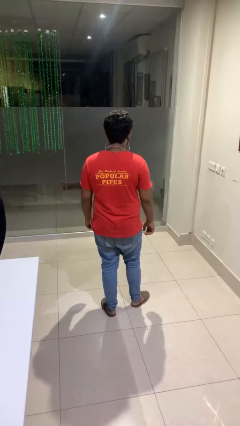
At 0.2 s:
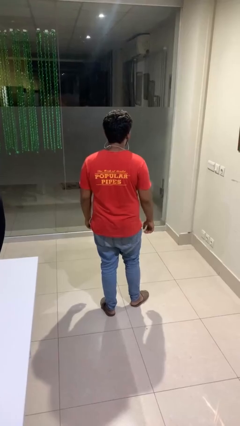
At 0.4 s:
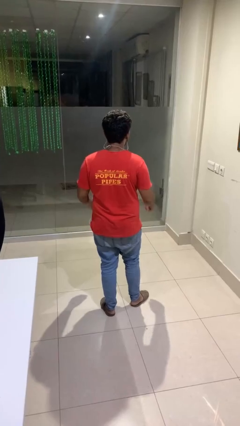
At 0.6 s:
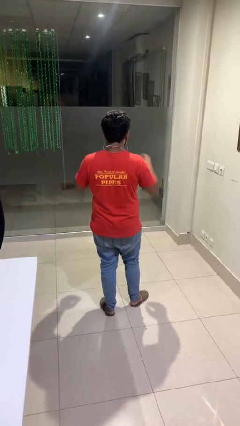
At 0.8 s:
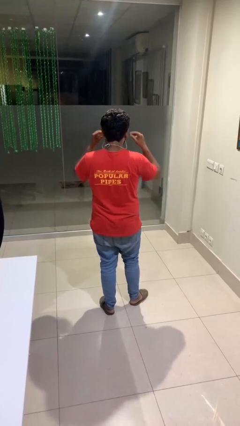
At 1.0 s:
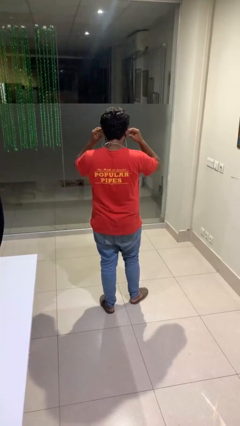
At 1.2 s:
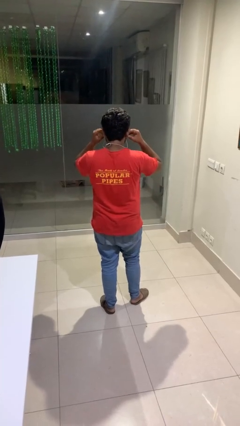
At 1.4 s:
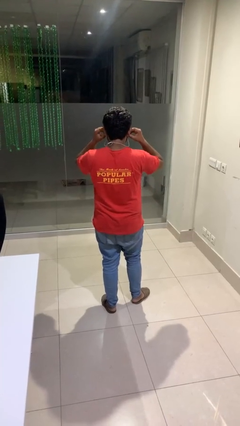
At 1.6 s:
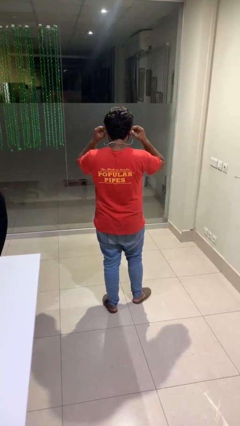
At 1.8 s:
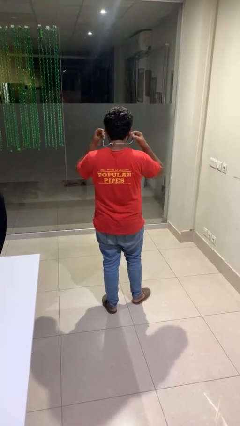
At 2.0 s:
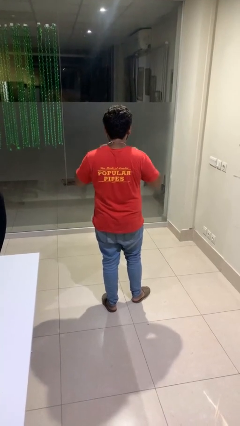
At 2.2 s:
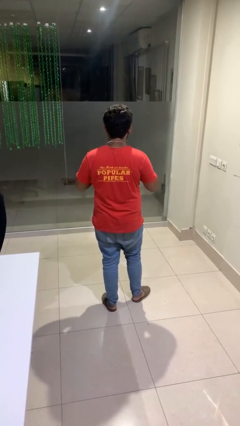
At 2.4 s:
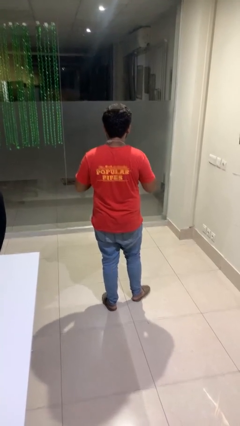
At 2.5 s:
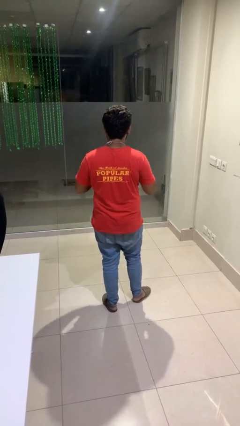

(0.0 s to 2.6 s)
person takes off headphones

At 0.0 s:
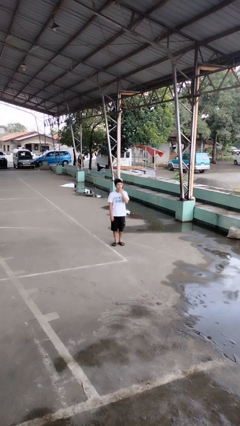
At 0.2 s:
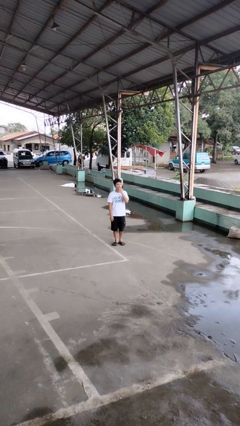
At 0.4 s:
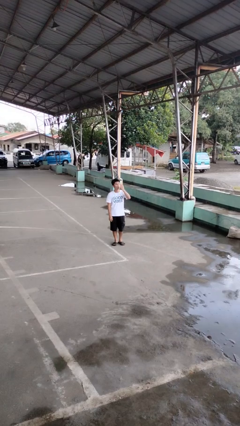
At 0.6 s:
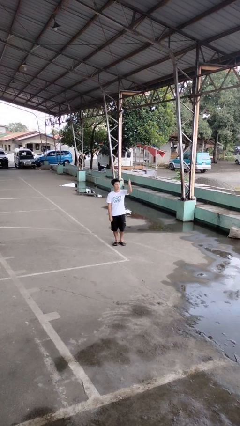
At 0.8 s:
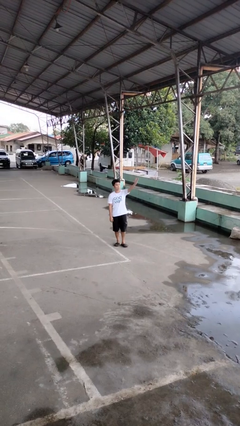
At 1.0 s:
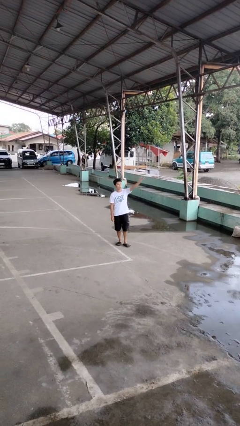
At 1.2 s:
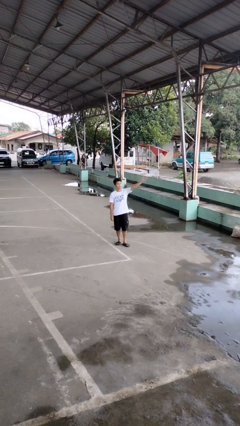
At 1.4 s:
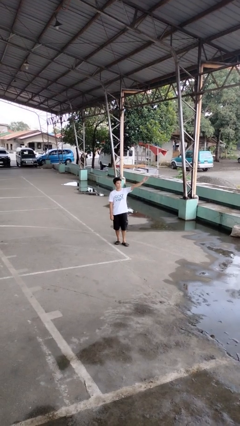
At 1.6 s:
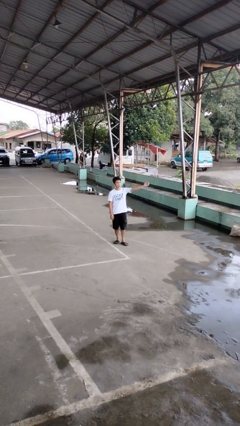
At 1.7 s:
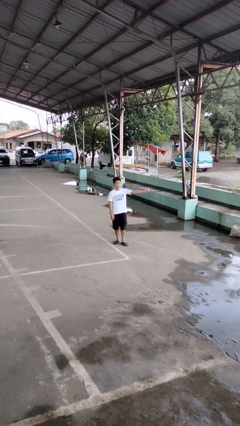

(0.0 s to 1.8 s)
person gestures blow kiss

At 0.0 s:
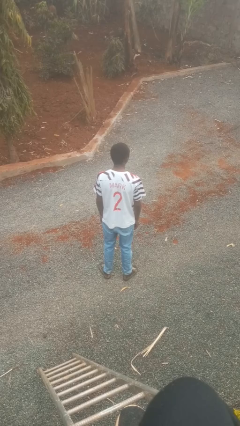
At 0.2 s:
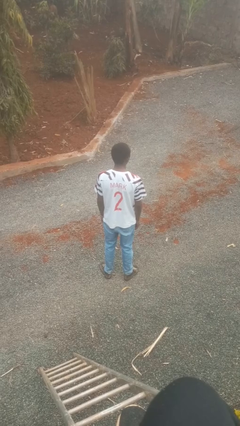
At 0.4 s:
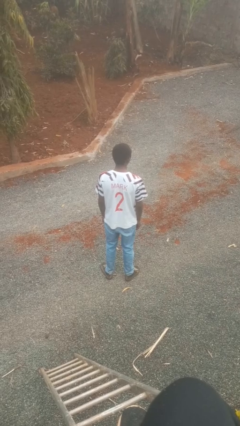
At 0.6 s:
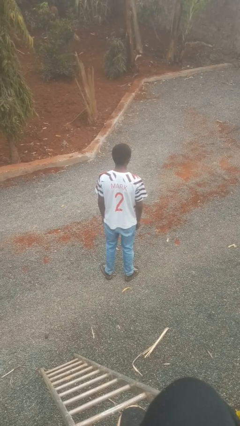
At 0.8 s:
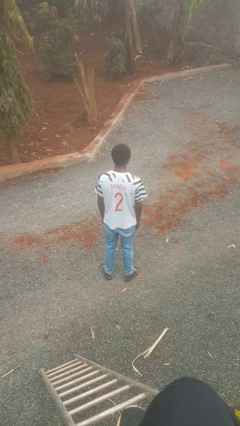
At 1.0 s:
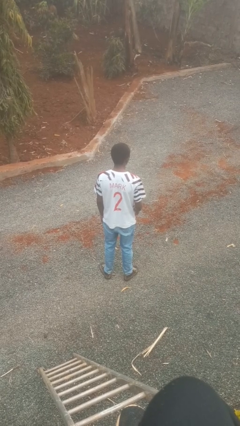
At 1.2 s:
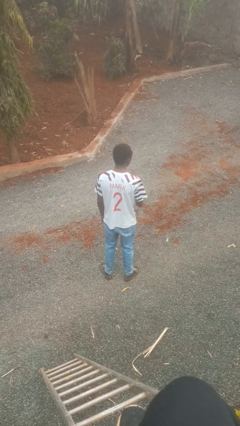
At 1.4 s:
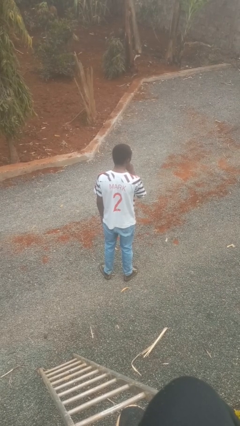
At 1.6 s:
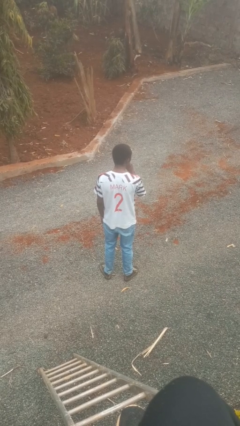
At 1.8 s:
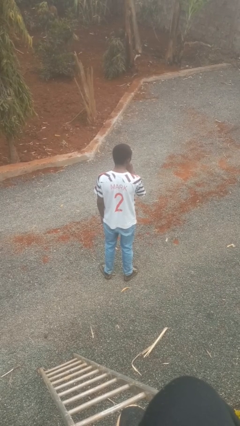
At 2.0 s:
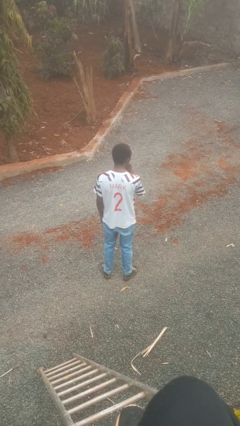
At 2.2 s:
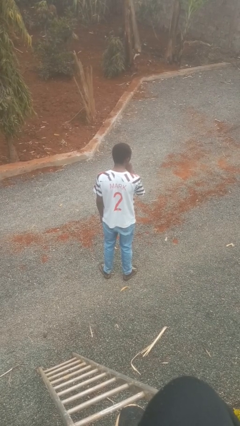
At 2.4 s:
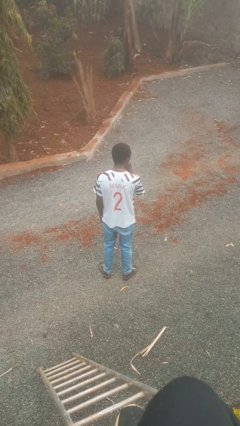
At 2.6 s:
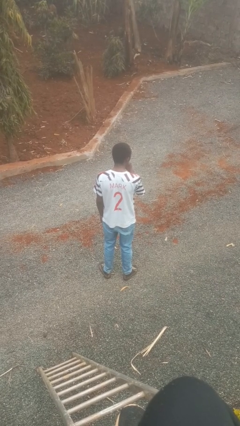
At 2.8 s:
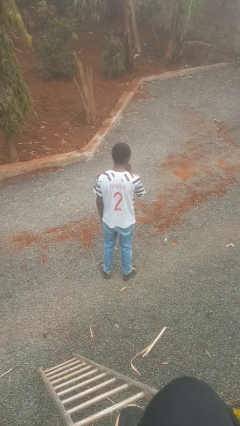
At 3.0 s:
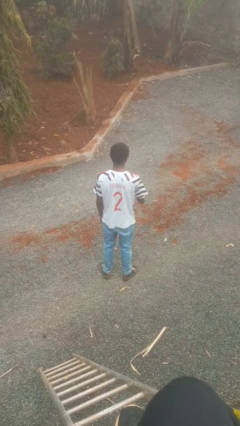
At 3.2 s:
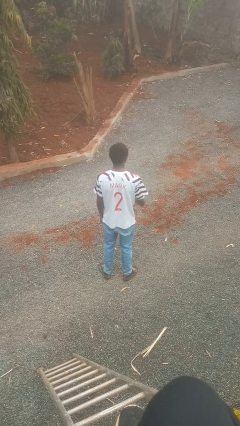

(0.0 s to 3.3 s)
person gestures be quiet

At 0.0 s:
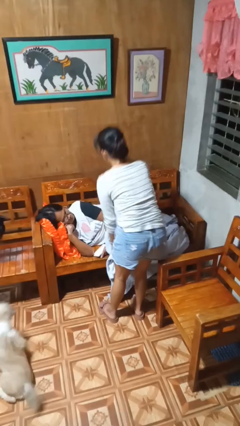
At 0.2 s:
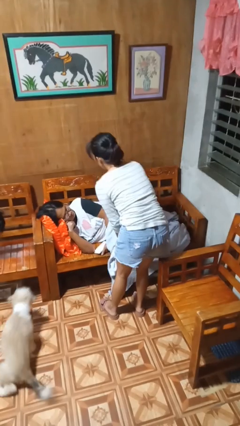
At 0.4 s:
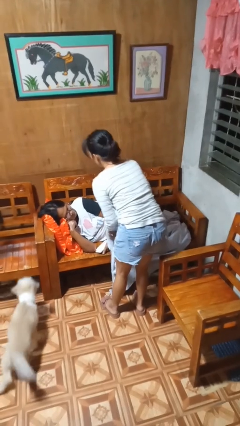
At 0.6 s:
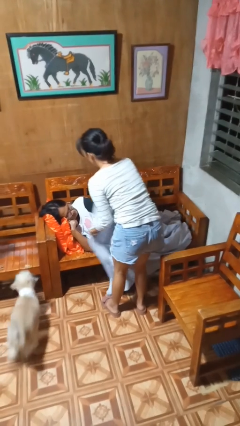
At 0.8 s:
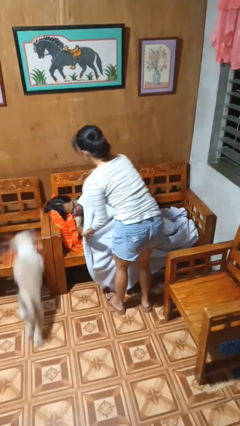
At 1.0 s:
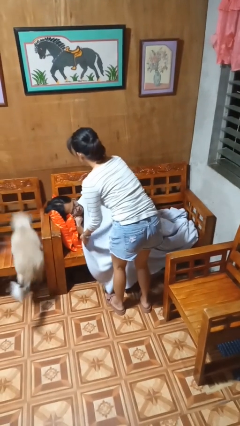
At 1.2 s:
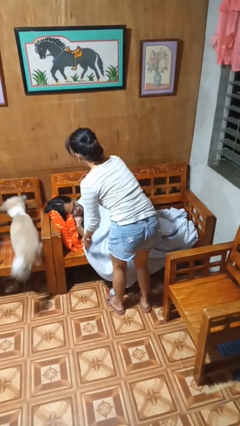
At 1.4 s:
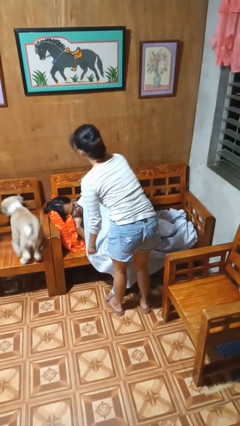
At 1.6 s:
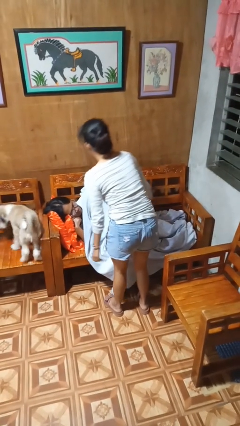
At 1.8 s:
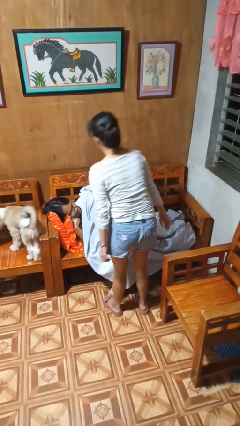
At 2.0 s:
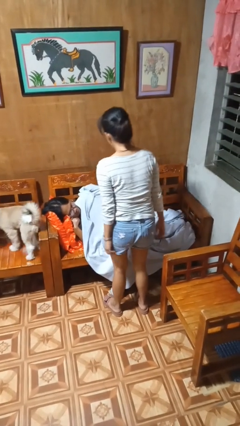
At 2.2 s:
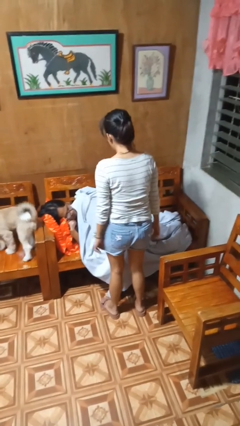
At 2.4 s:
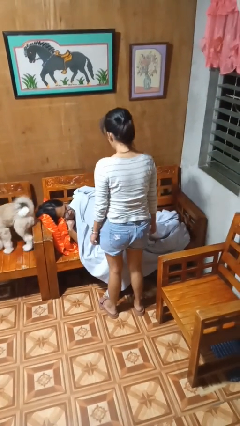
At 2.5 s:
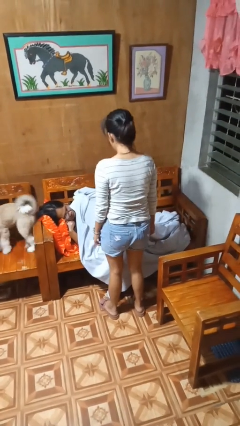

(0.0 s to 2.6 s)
person covers friend with blanket

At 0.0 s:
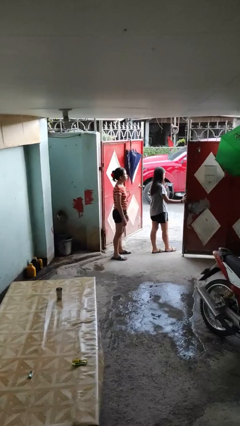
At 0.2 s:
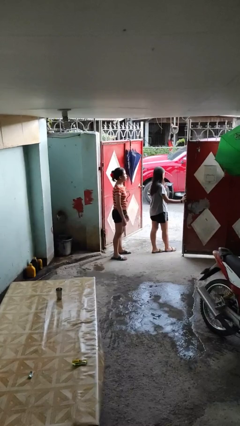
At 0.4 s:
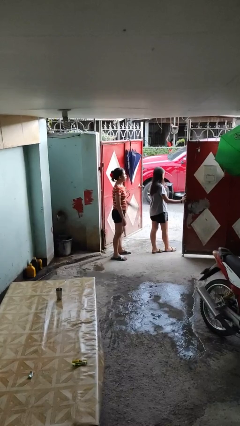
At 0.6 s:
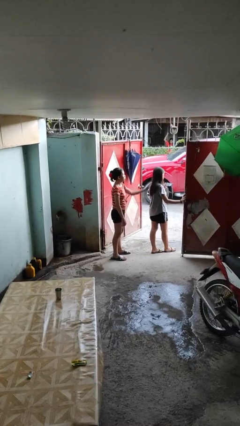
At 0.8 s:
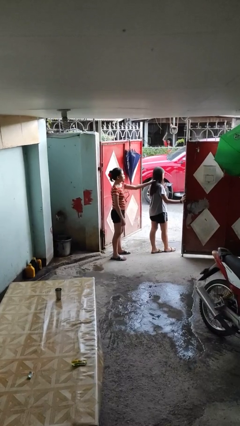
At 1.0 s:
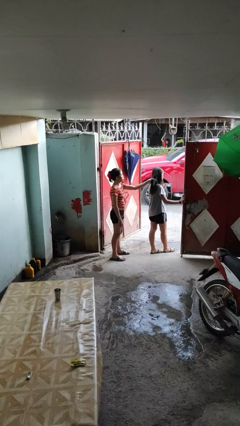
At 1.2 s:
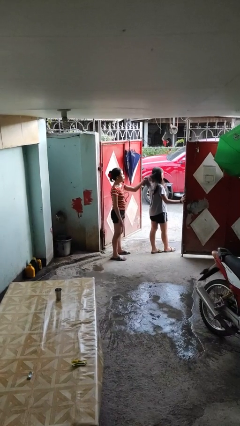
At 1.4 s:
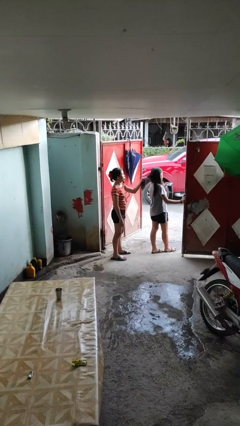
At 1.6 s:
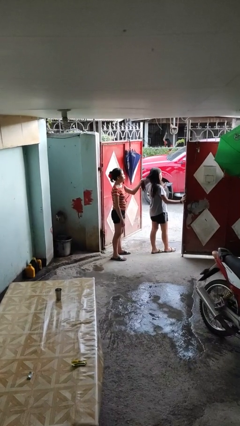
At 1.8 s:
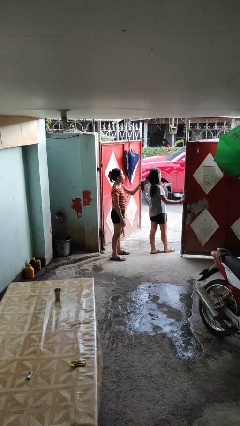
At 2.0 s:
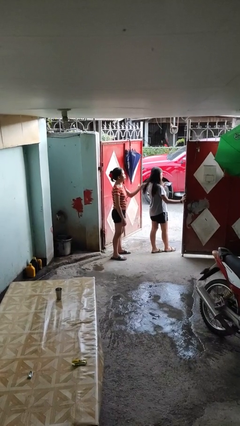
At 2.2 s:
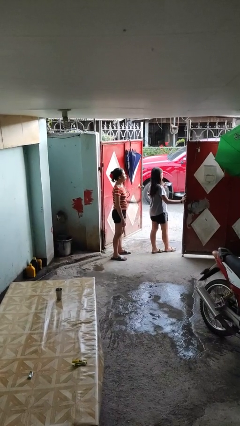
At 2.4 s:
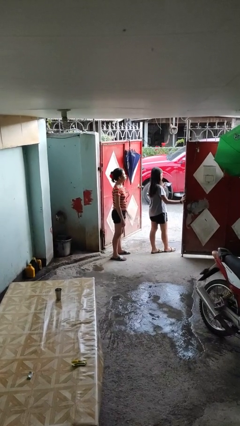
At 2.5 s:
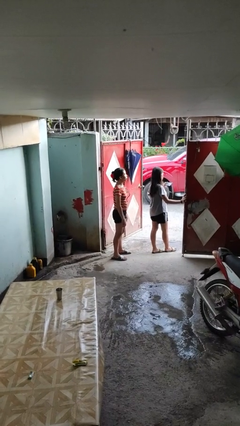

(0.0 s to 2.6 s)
person grabs person by hair

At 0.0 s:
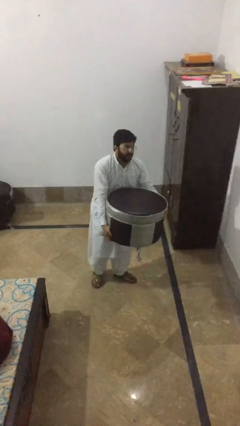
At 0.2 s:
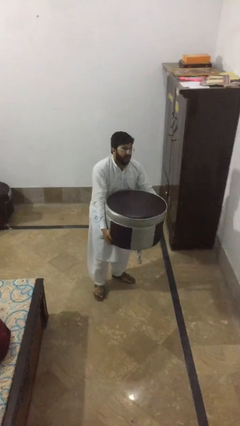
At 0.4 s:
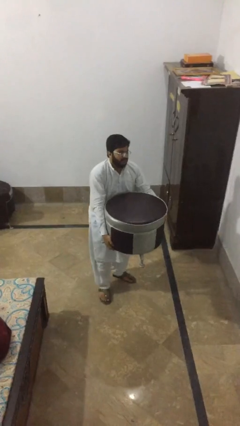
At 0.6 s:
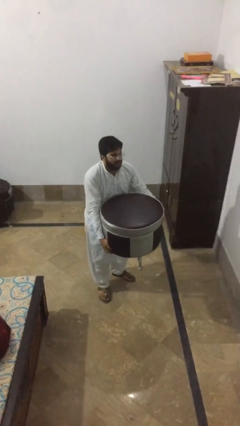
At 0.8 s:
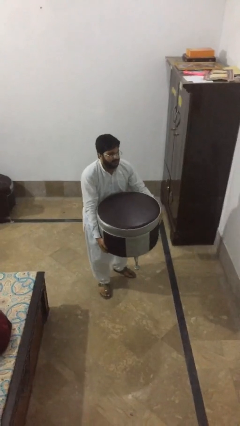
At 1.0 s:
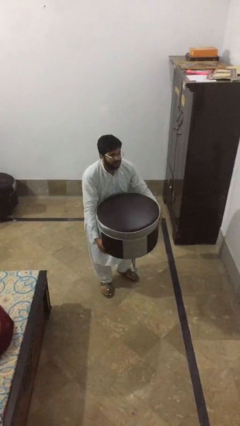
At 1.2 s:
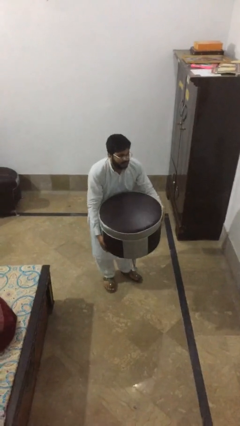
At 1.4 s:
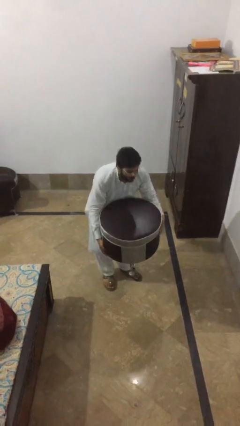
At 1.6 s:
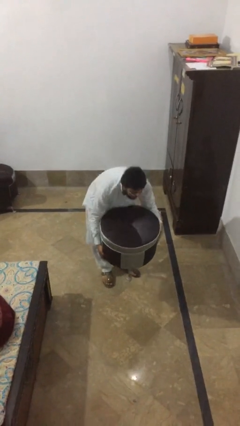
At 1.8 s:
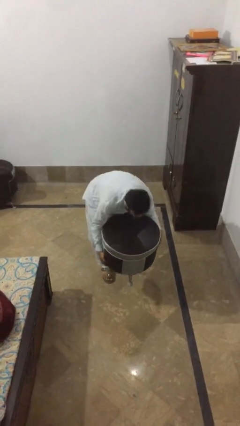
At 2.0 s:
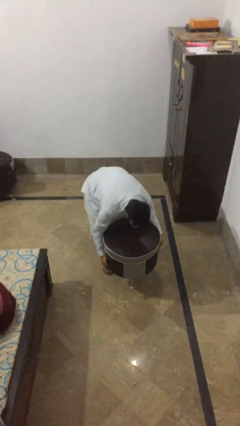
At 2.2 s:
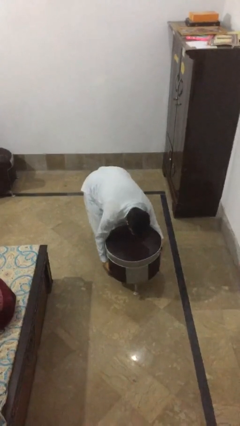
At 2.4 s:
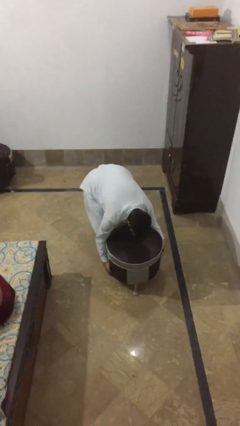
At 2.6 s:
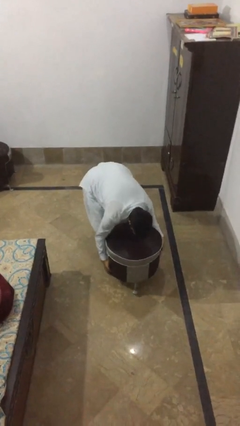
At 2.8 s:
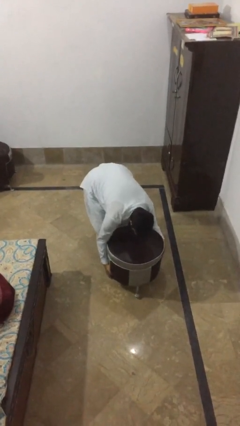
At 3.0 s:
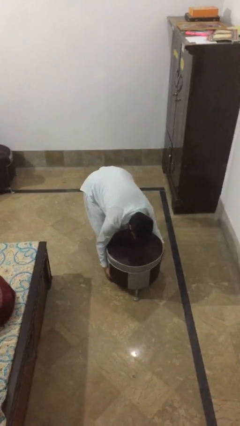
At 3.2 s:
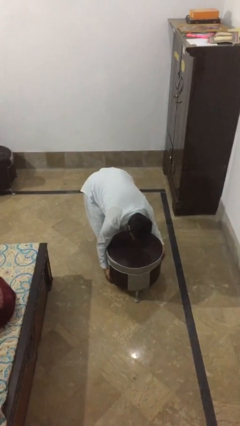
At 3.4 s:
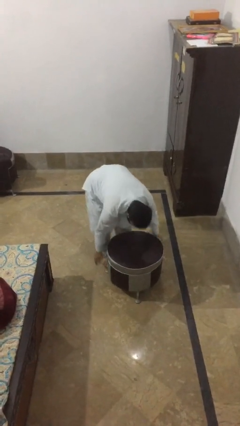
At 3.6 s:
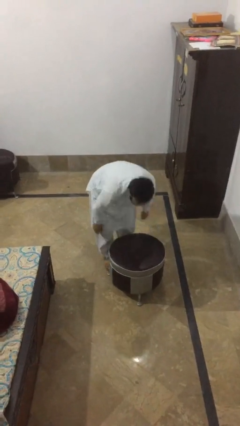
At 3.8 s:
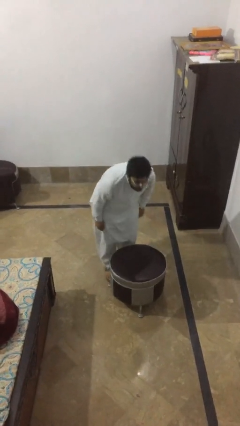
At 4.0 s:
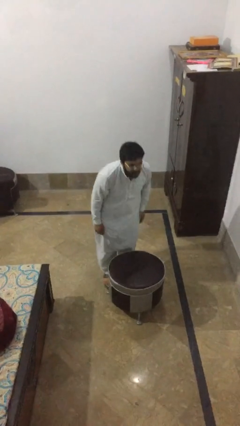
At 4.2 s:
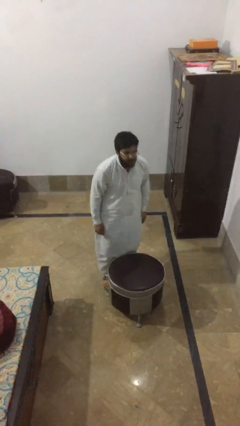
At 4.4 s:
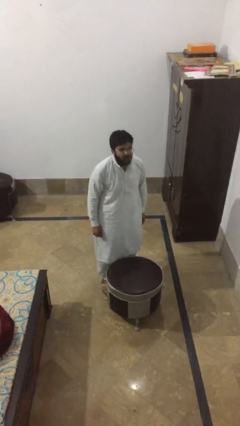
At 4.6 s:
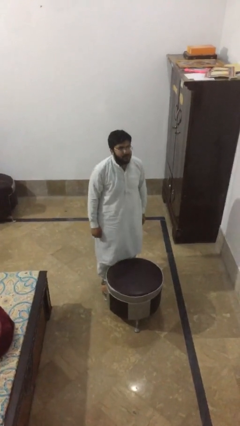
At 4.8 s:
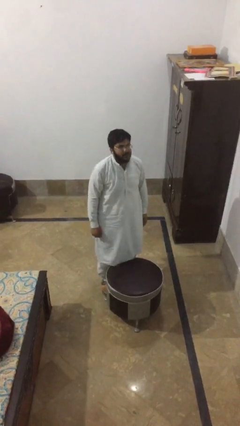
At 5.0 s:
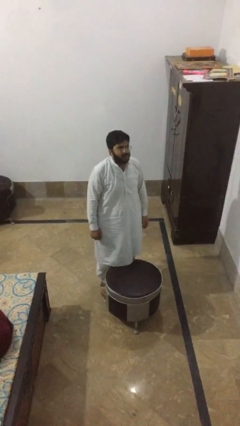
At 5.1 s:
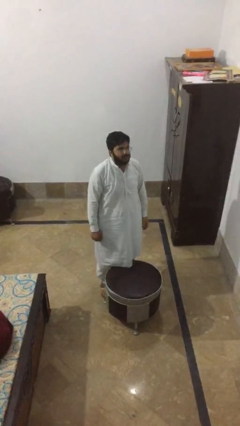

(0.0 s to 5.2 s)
person puts down object on floor
